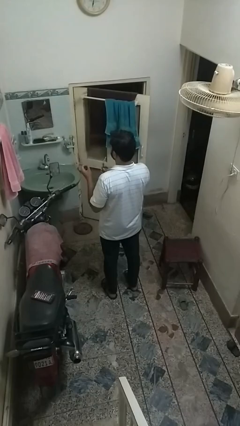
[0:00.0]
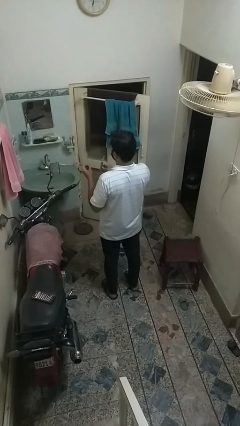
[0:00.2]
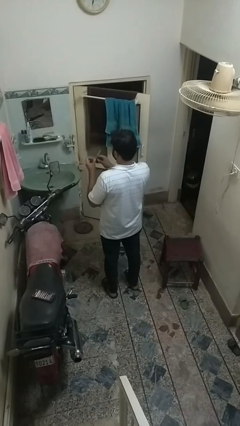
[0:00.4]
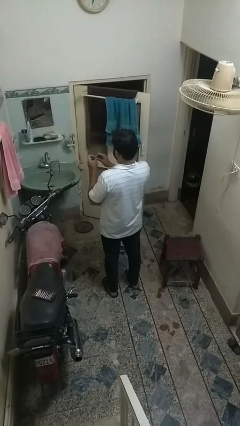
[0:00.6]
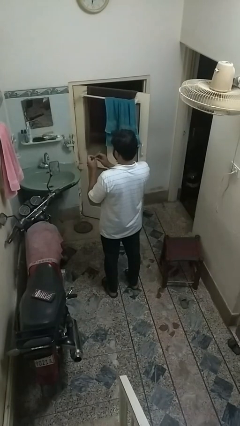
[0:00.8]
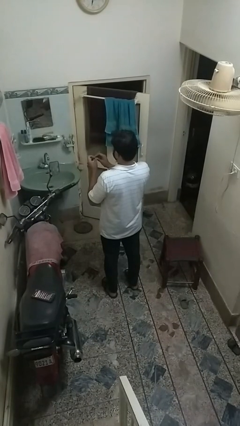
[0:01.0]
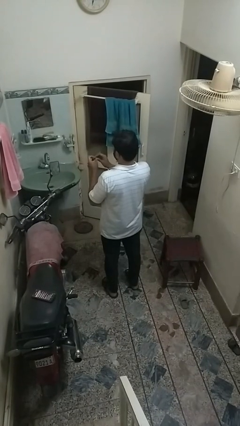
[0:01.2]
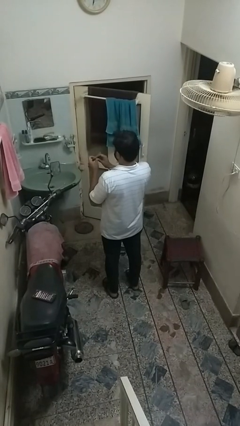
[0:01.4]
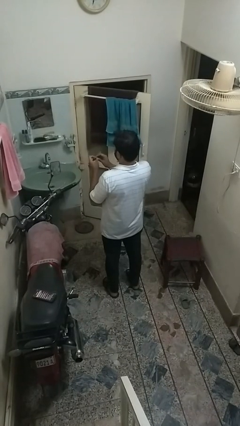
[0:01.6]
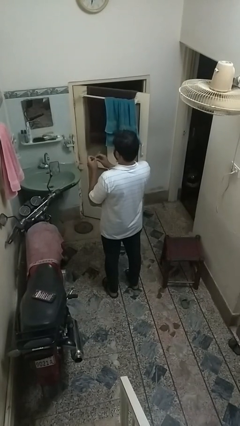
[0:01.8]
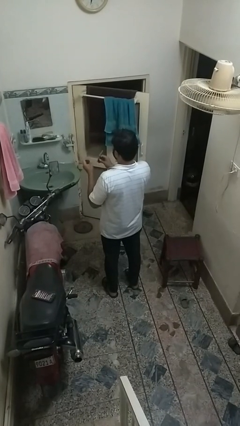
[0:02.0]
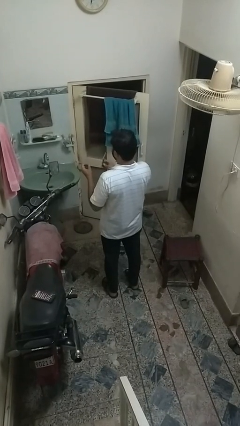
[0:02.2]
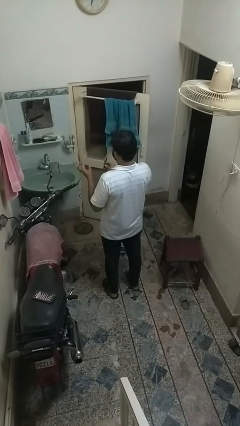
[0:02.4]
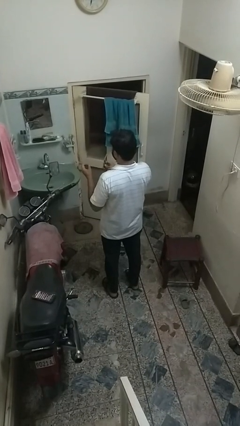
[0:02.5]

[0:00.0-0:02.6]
person files fingernails

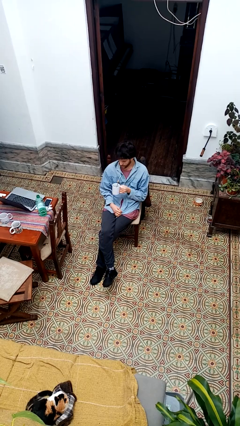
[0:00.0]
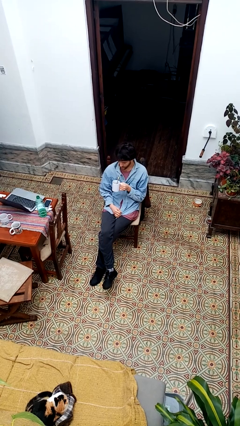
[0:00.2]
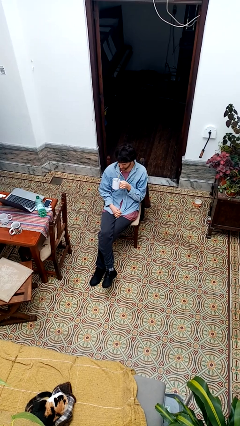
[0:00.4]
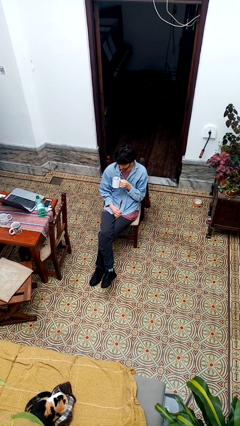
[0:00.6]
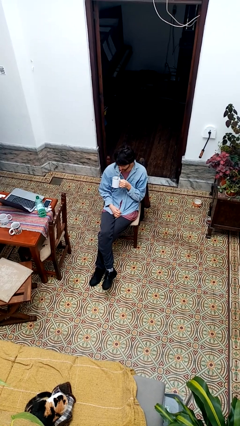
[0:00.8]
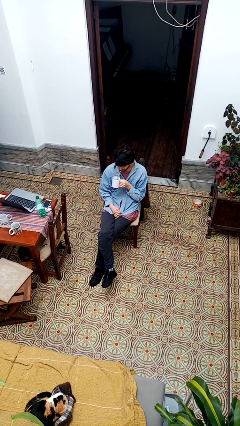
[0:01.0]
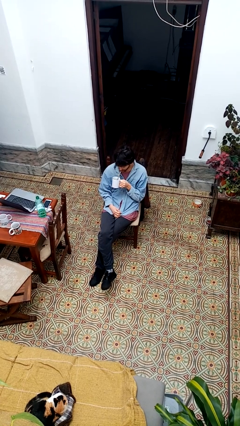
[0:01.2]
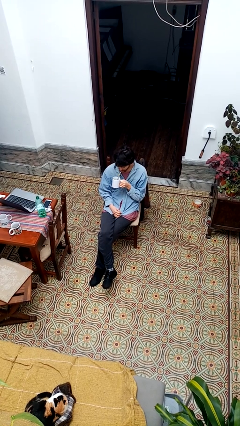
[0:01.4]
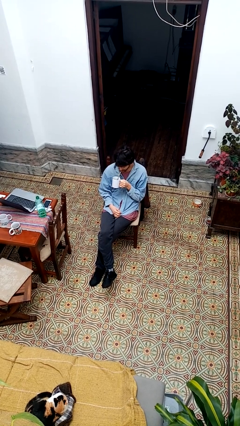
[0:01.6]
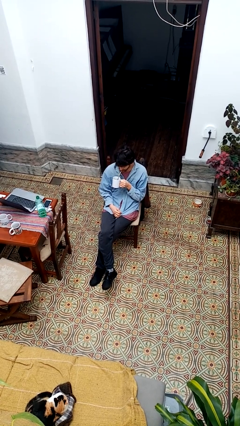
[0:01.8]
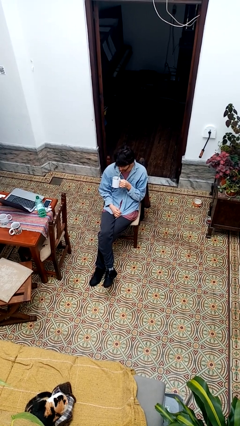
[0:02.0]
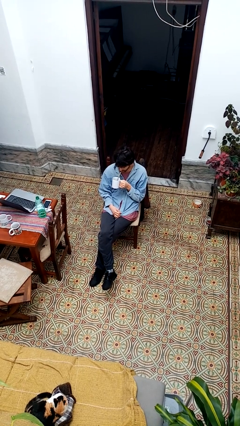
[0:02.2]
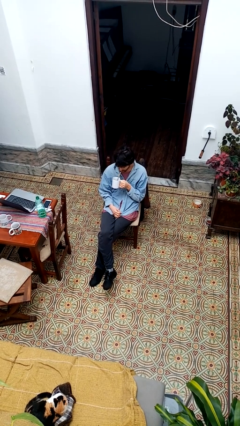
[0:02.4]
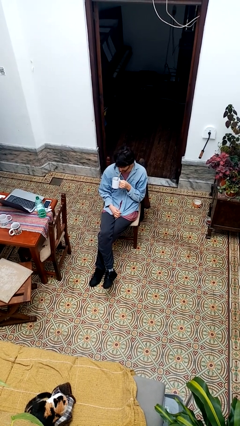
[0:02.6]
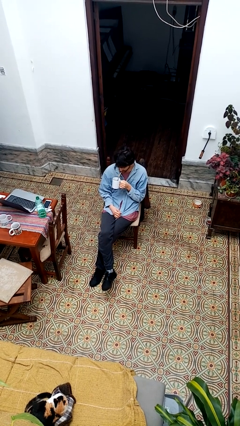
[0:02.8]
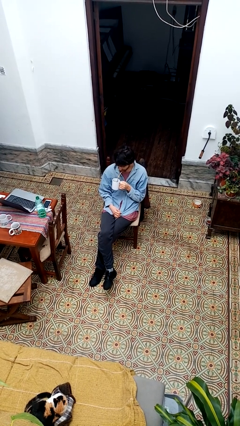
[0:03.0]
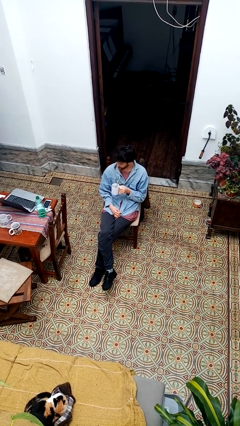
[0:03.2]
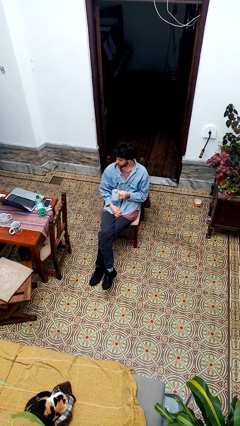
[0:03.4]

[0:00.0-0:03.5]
person drinks from straw

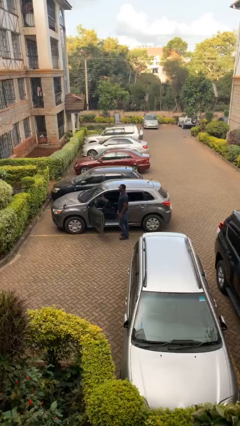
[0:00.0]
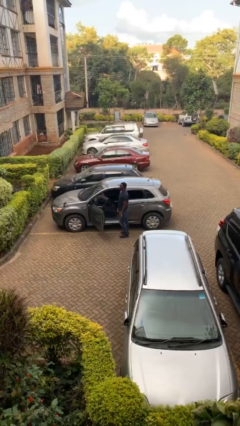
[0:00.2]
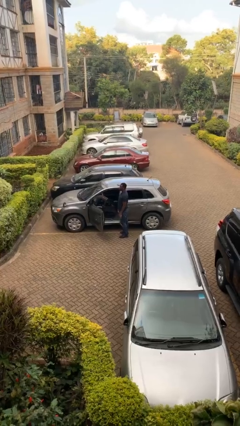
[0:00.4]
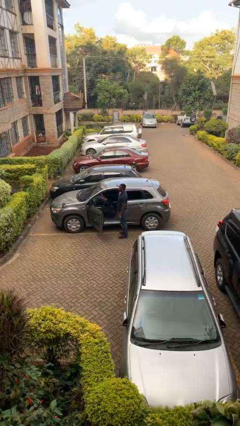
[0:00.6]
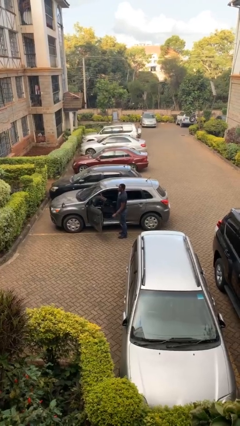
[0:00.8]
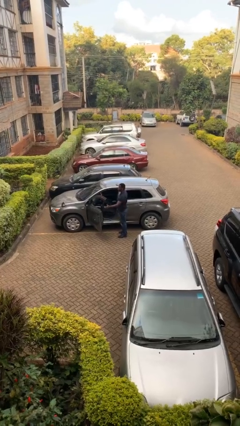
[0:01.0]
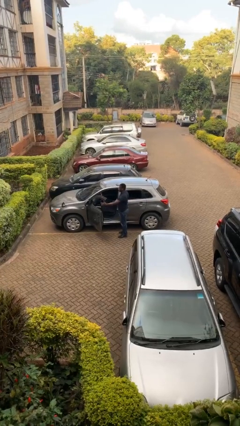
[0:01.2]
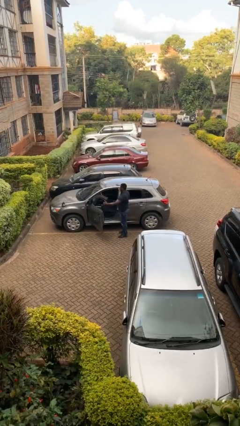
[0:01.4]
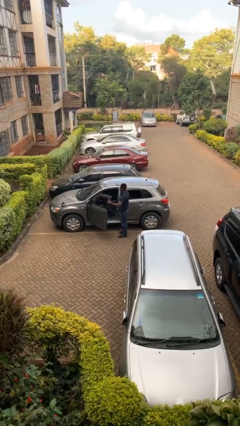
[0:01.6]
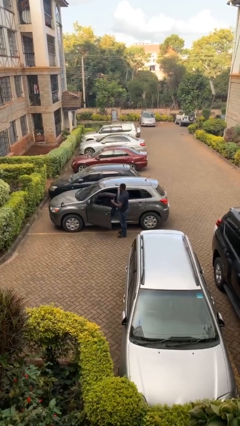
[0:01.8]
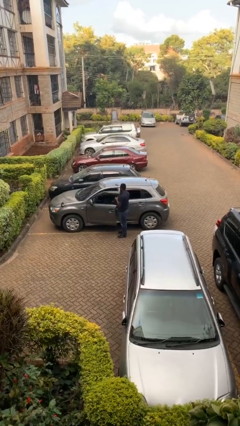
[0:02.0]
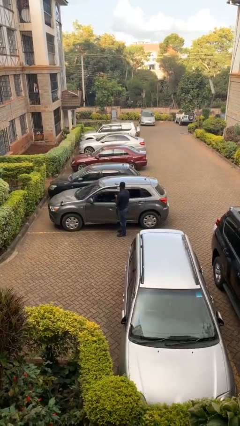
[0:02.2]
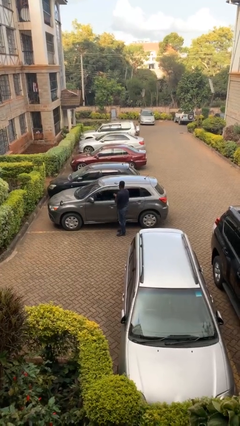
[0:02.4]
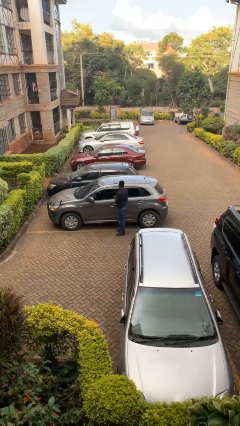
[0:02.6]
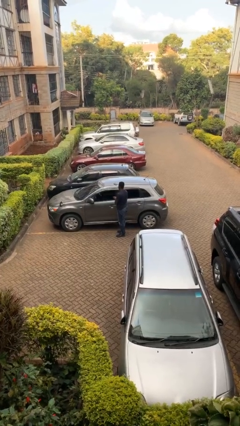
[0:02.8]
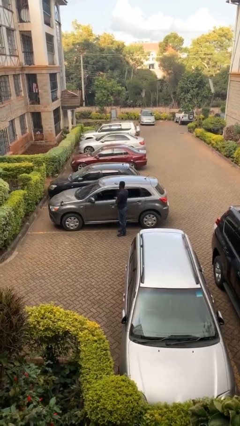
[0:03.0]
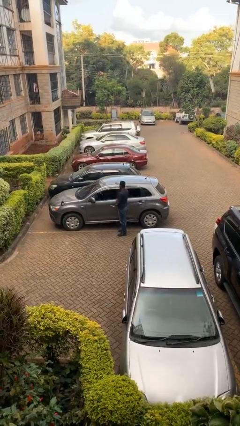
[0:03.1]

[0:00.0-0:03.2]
person closes car door

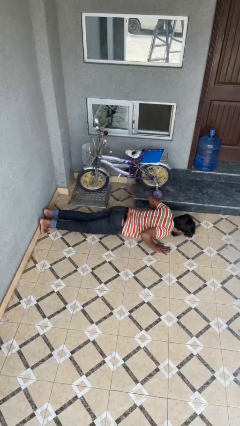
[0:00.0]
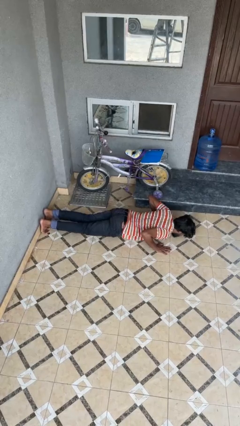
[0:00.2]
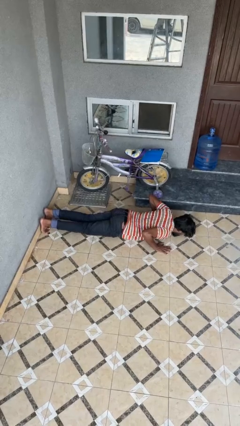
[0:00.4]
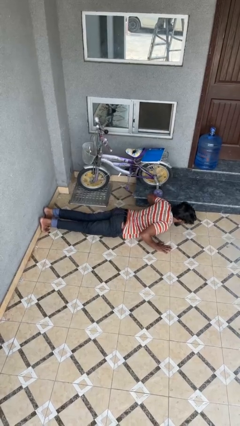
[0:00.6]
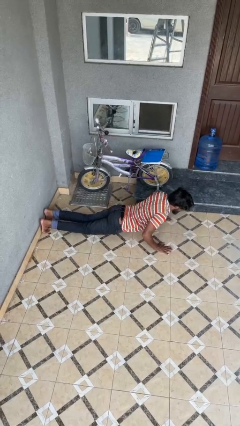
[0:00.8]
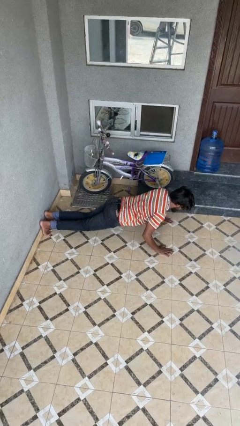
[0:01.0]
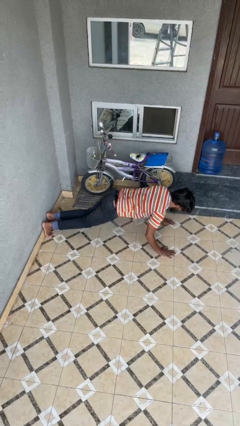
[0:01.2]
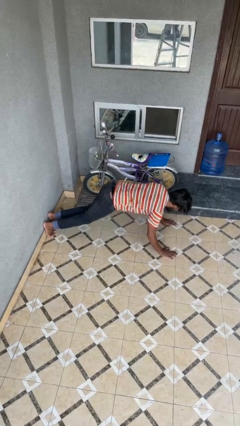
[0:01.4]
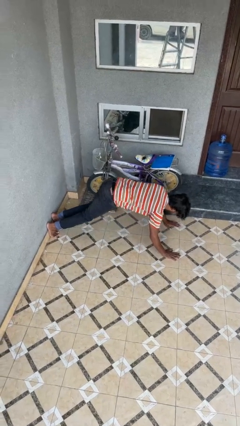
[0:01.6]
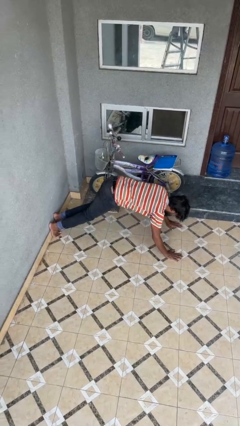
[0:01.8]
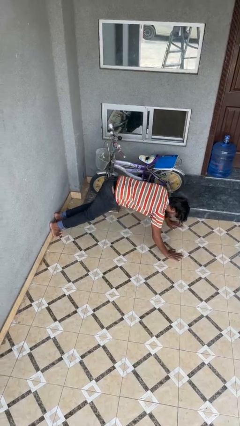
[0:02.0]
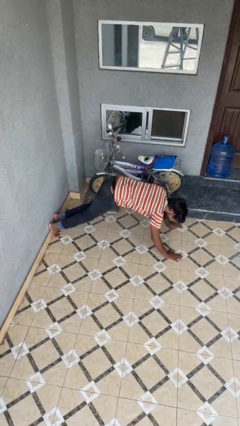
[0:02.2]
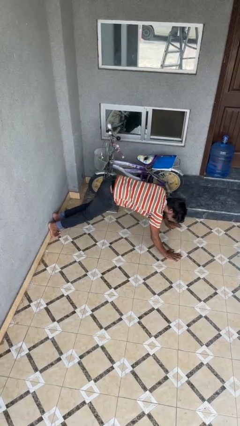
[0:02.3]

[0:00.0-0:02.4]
person exercises with pushup

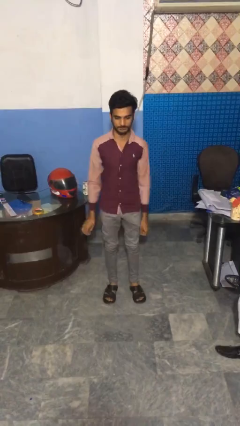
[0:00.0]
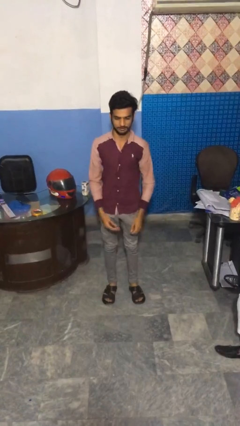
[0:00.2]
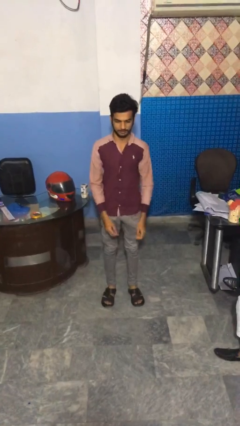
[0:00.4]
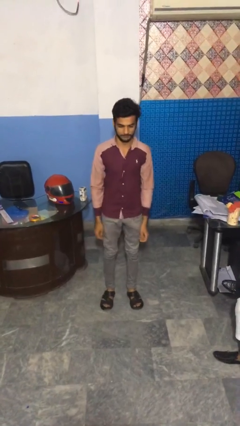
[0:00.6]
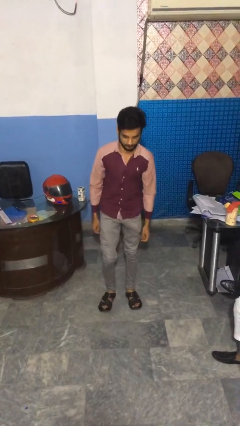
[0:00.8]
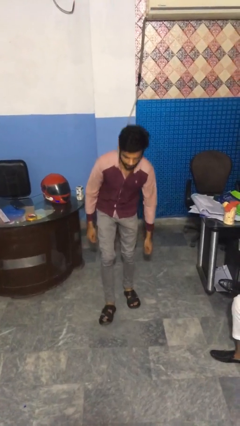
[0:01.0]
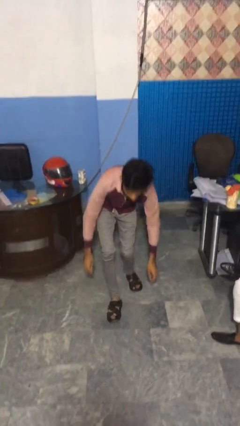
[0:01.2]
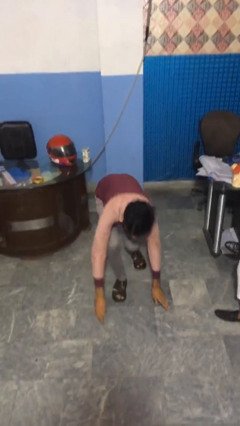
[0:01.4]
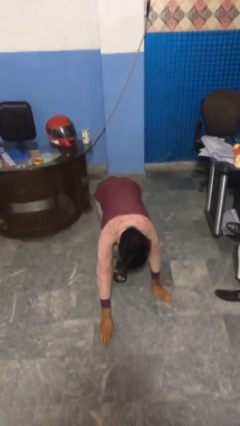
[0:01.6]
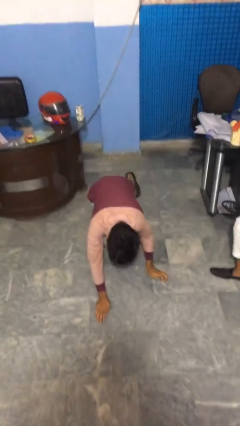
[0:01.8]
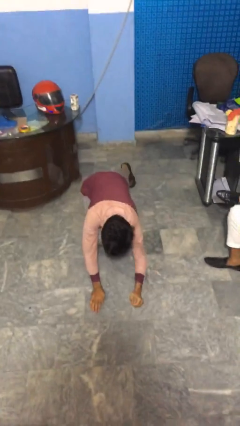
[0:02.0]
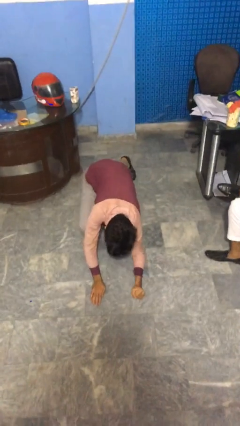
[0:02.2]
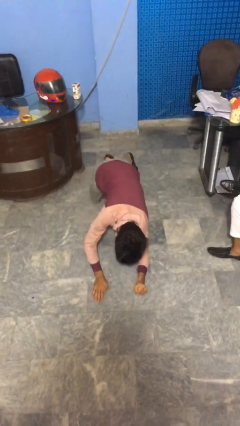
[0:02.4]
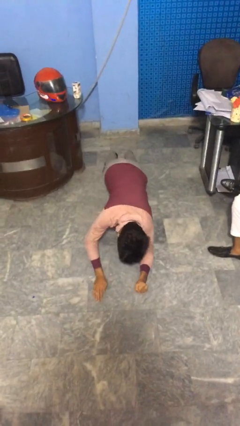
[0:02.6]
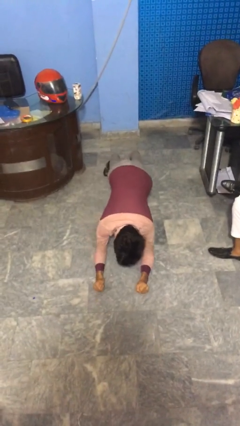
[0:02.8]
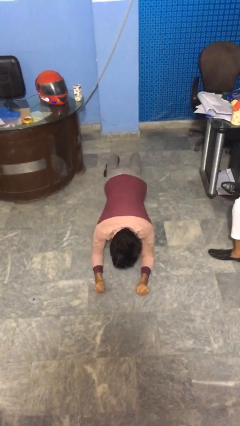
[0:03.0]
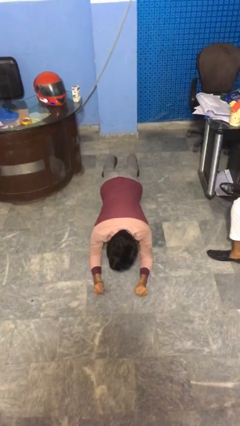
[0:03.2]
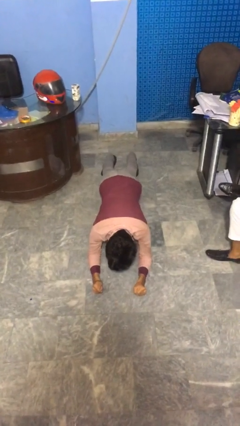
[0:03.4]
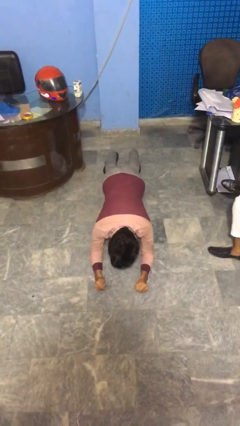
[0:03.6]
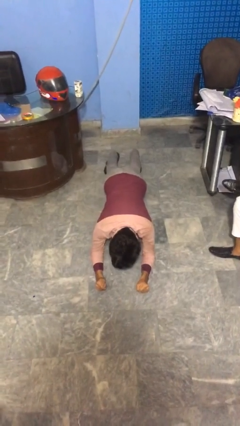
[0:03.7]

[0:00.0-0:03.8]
person exercises with plank

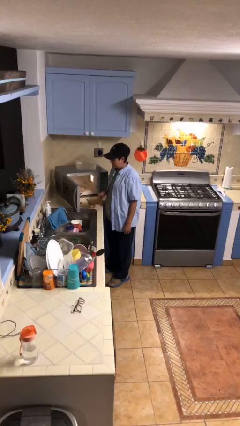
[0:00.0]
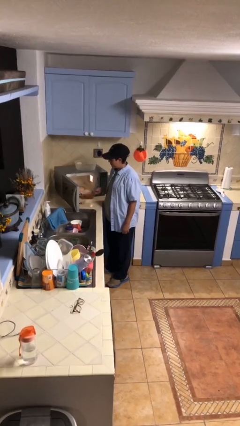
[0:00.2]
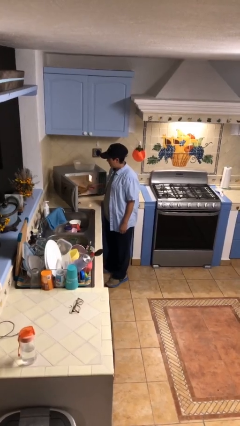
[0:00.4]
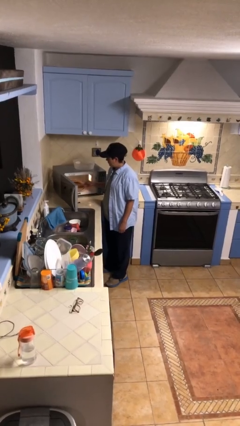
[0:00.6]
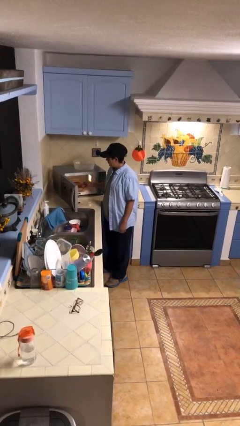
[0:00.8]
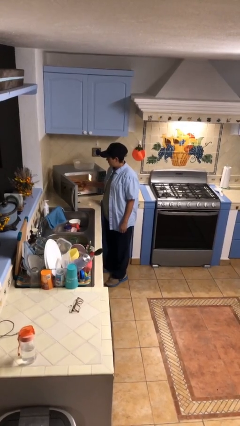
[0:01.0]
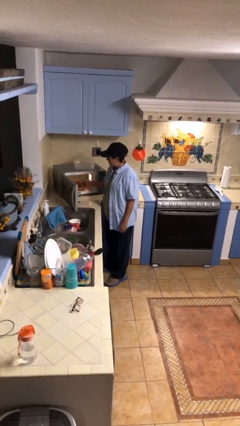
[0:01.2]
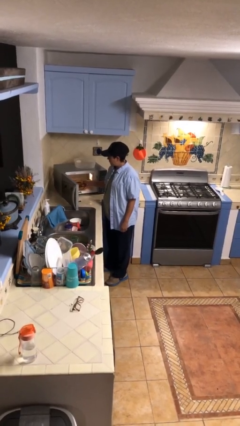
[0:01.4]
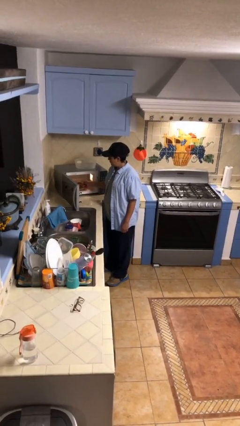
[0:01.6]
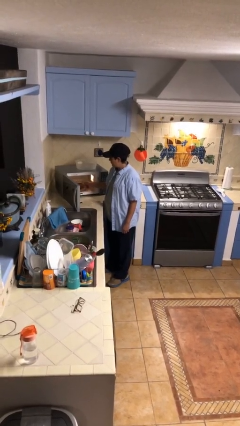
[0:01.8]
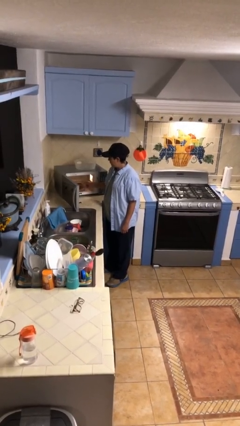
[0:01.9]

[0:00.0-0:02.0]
person puts object into microwave
